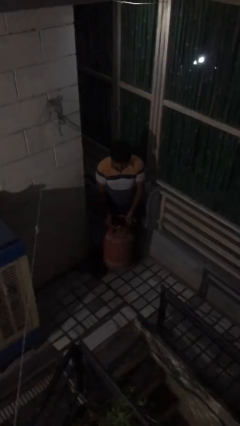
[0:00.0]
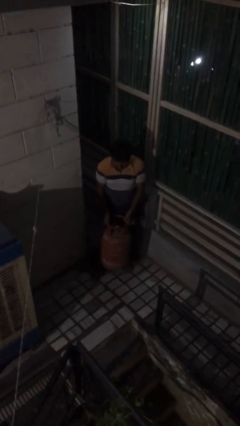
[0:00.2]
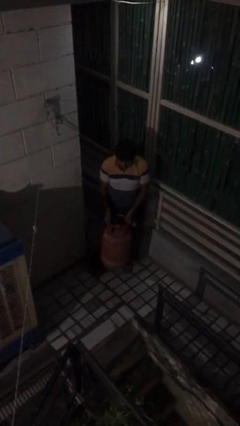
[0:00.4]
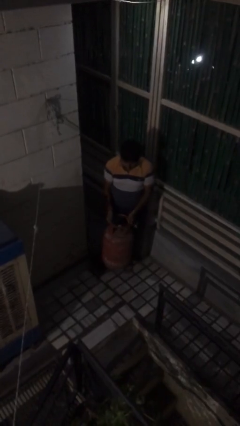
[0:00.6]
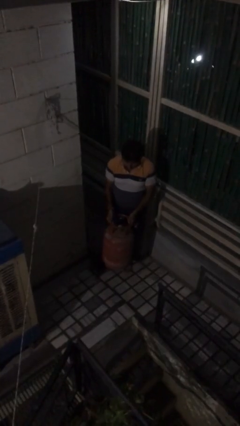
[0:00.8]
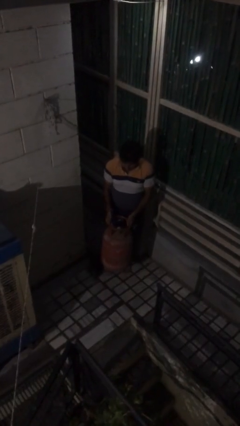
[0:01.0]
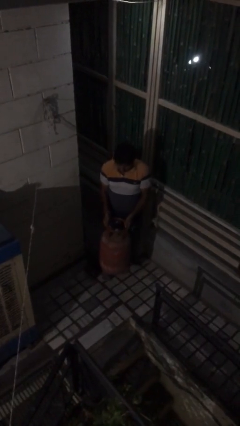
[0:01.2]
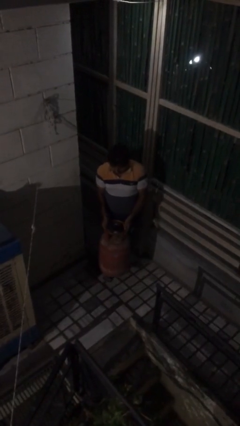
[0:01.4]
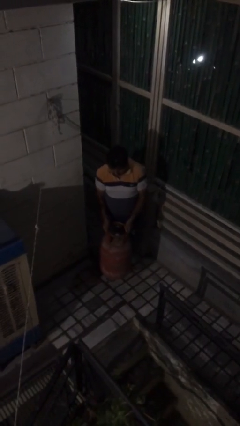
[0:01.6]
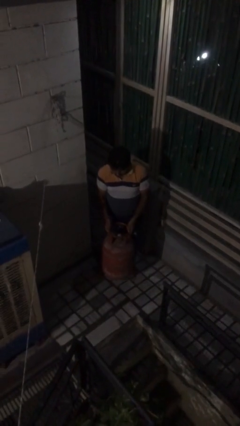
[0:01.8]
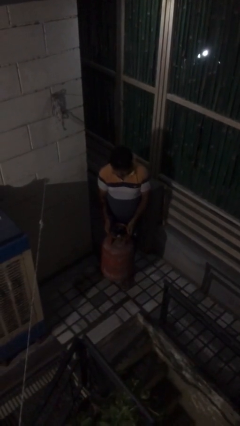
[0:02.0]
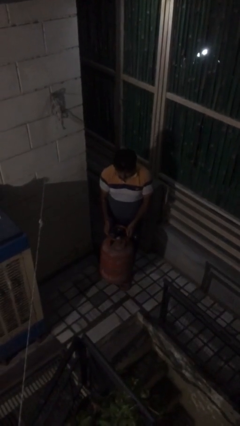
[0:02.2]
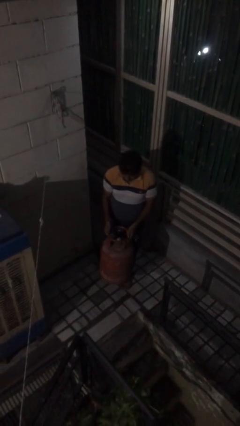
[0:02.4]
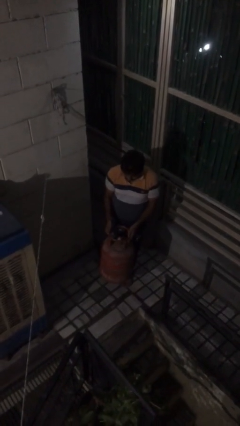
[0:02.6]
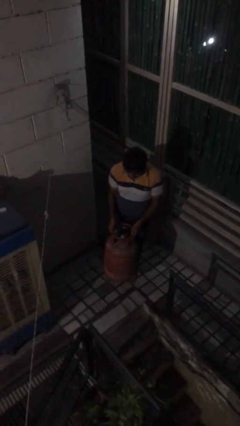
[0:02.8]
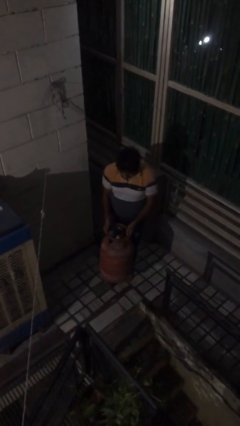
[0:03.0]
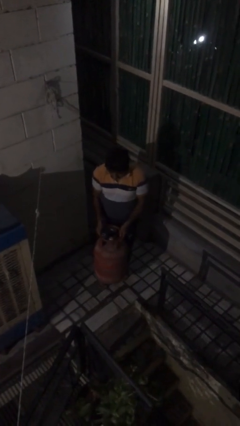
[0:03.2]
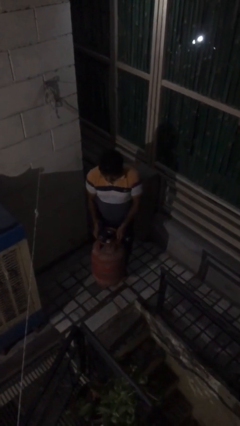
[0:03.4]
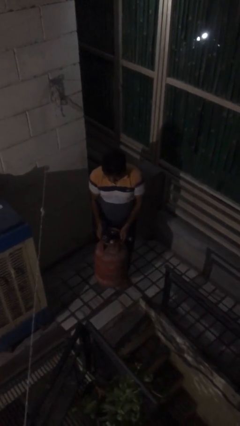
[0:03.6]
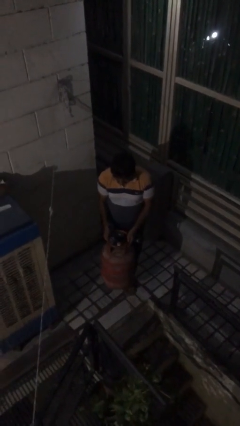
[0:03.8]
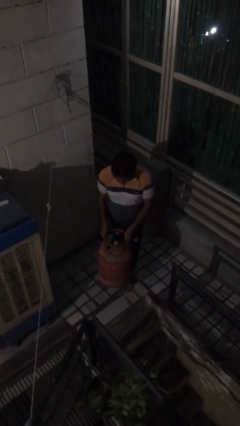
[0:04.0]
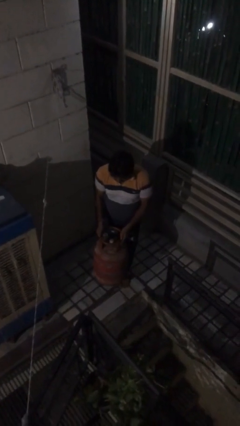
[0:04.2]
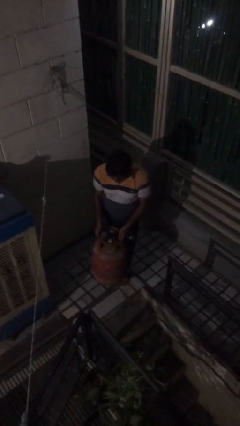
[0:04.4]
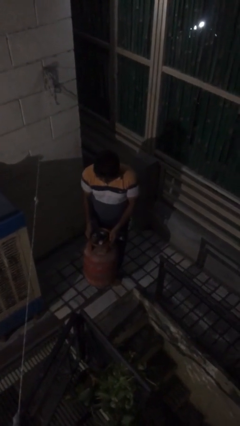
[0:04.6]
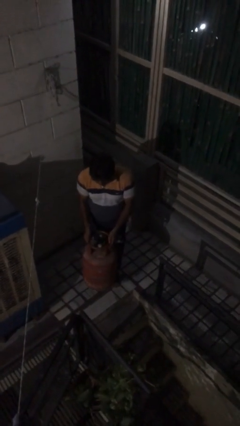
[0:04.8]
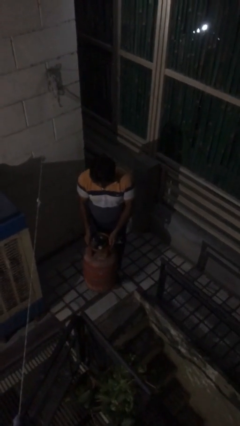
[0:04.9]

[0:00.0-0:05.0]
person carries heavy object

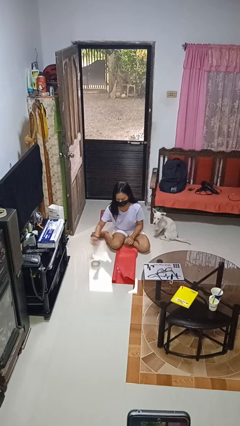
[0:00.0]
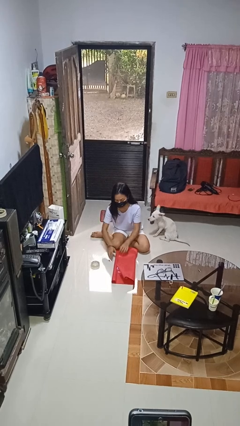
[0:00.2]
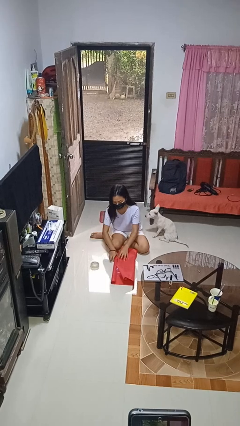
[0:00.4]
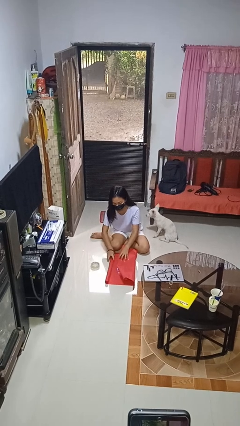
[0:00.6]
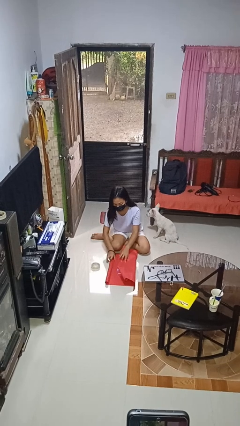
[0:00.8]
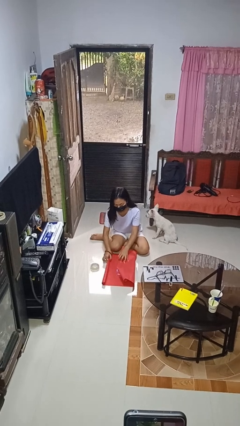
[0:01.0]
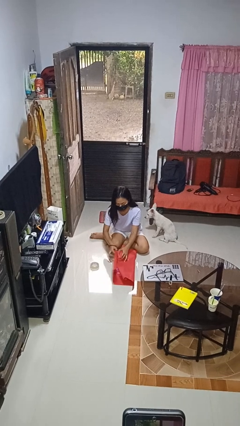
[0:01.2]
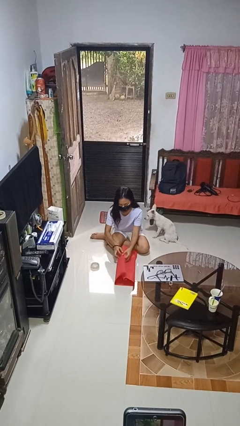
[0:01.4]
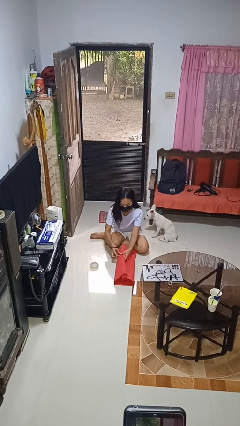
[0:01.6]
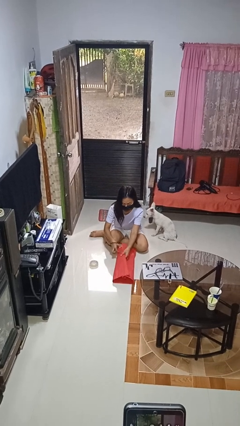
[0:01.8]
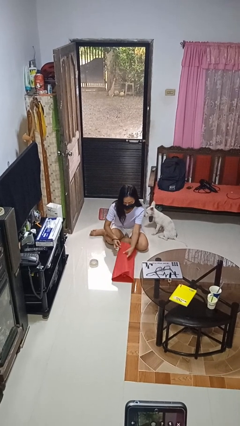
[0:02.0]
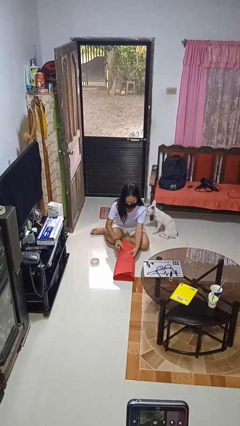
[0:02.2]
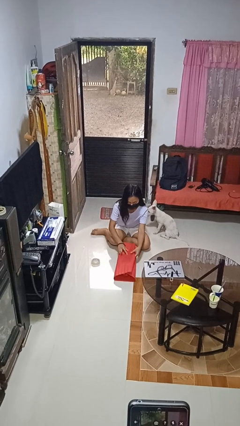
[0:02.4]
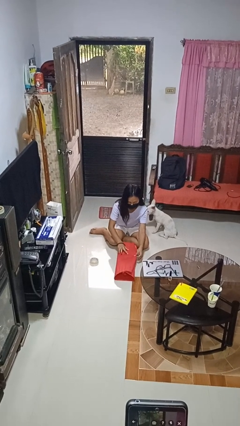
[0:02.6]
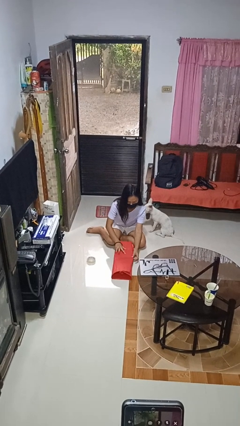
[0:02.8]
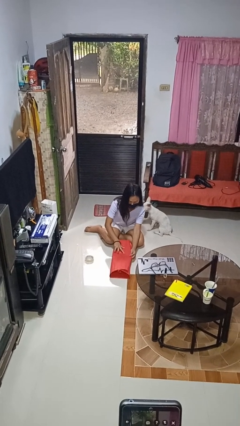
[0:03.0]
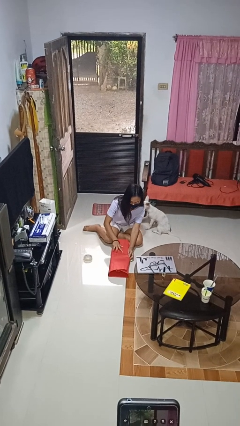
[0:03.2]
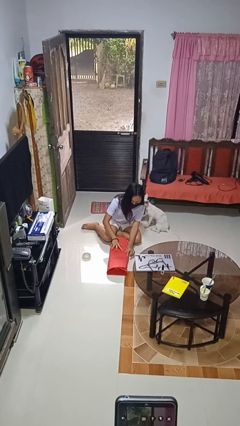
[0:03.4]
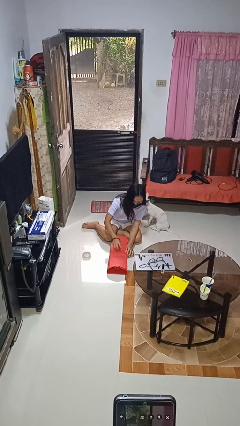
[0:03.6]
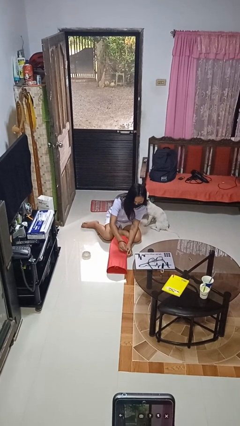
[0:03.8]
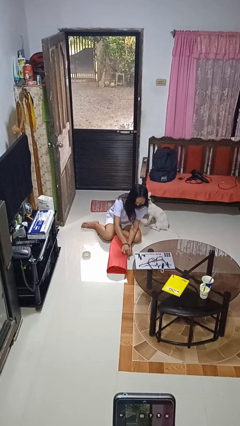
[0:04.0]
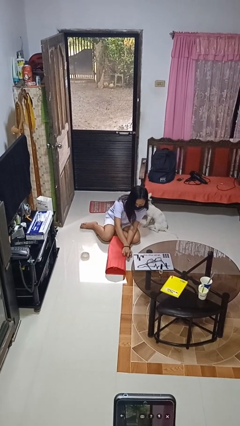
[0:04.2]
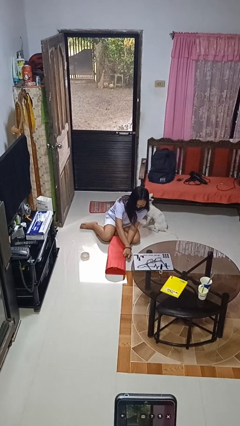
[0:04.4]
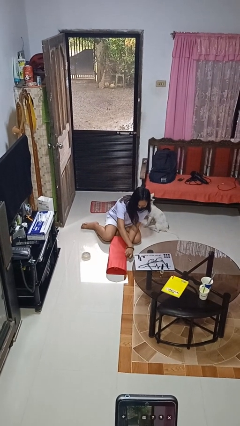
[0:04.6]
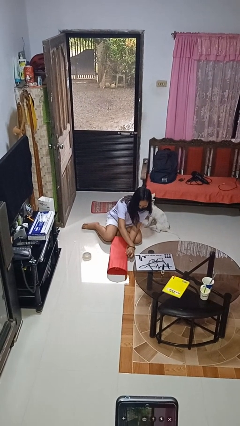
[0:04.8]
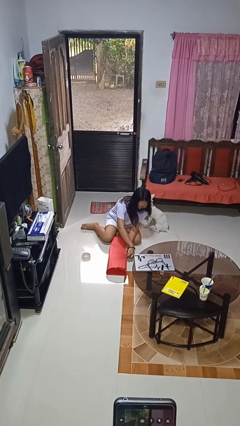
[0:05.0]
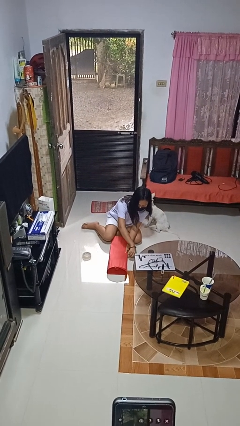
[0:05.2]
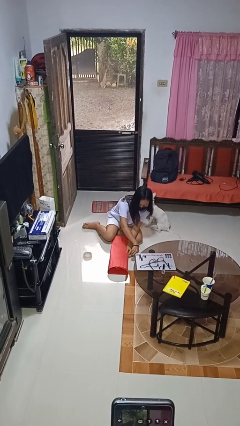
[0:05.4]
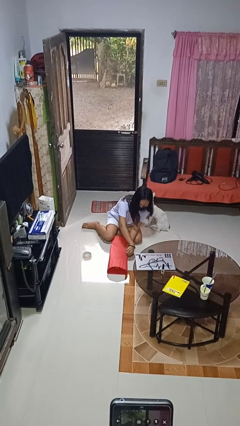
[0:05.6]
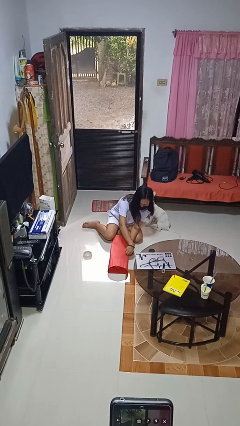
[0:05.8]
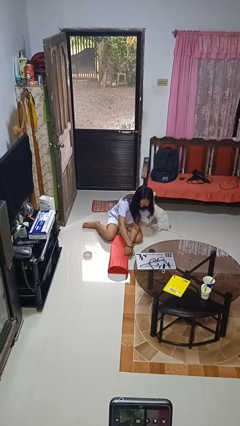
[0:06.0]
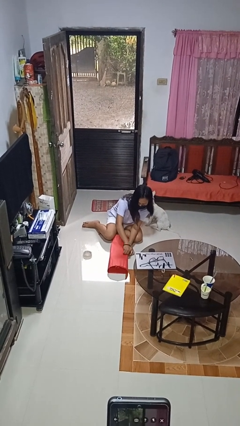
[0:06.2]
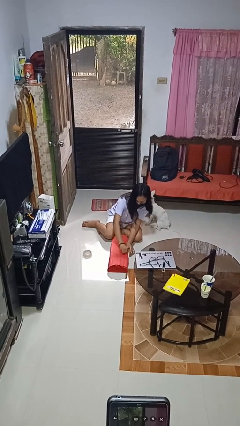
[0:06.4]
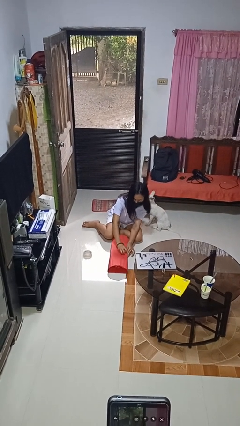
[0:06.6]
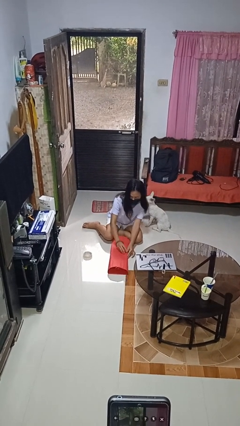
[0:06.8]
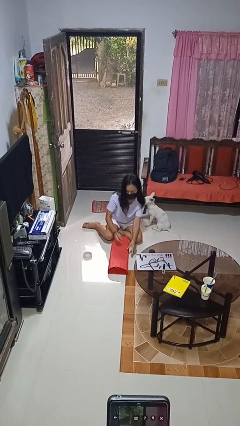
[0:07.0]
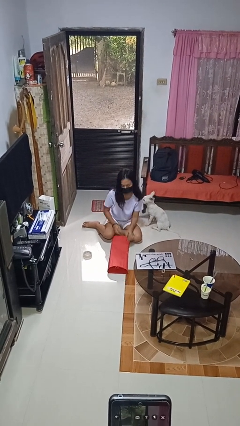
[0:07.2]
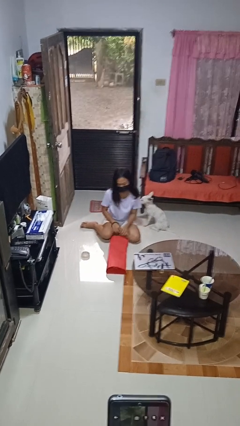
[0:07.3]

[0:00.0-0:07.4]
person wraps box

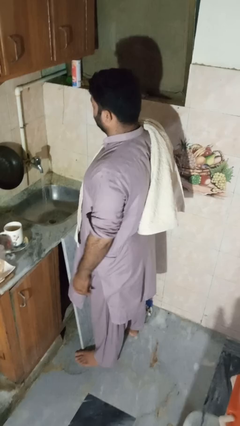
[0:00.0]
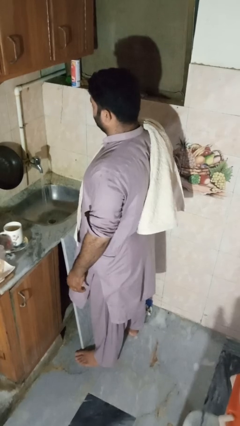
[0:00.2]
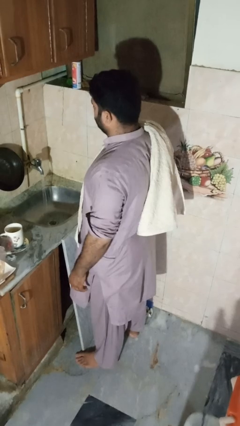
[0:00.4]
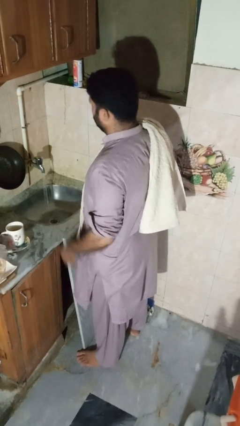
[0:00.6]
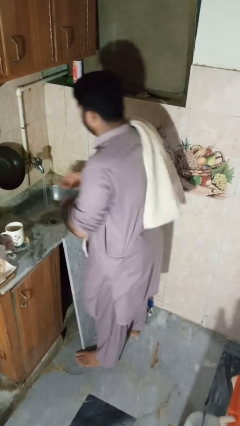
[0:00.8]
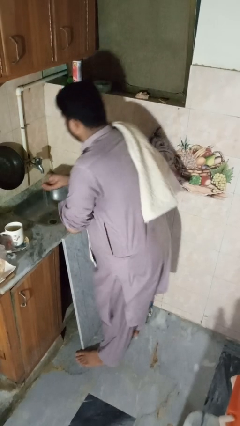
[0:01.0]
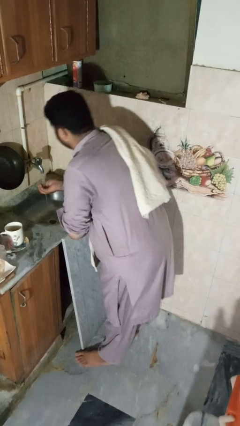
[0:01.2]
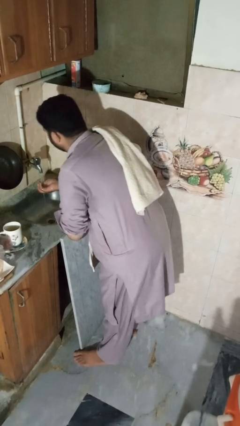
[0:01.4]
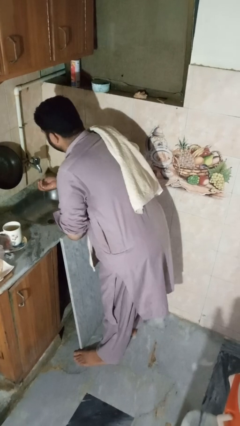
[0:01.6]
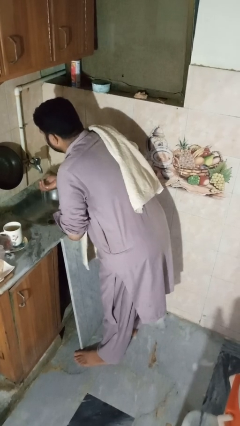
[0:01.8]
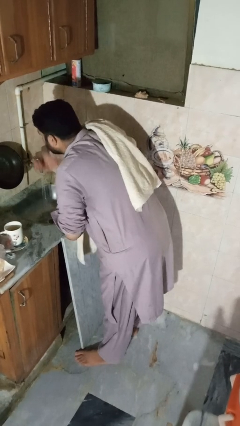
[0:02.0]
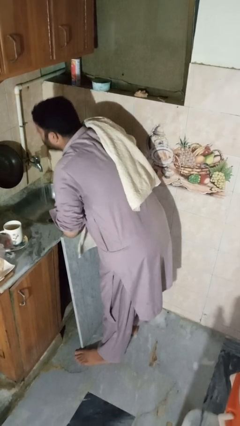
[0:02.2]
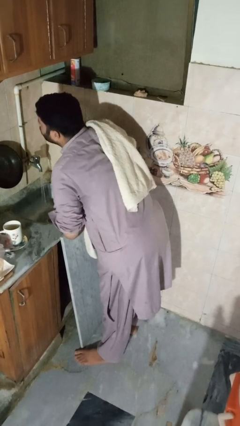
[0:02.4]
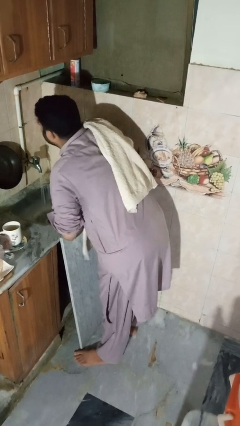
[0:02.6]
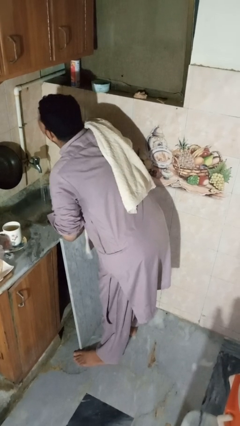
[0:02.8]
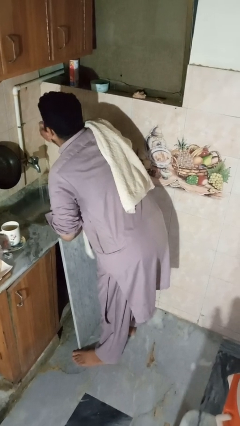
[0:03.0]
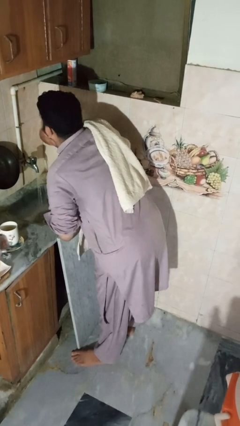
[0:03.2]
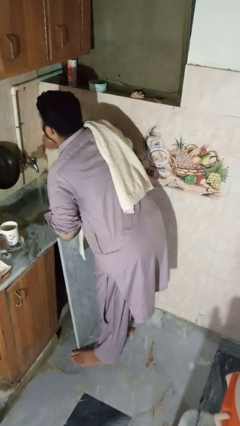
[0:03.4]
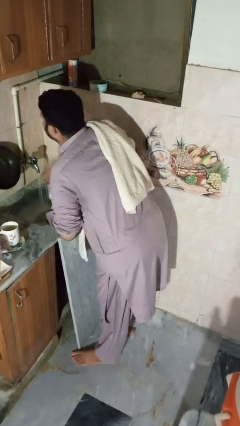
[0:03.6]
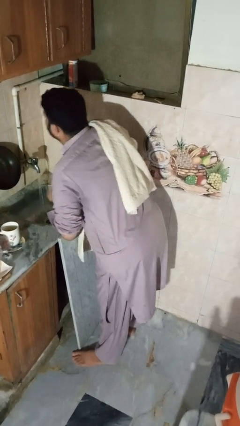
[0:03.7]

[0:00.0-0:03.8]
person washes face

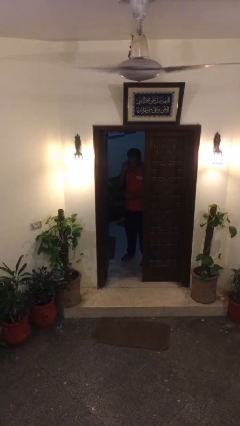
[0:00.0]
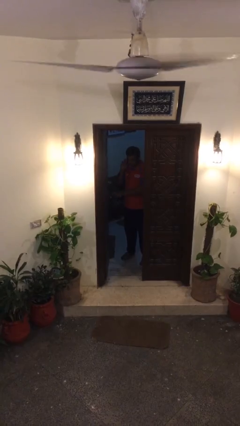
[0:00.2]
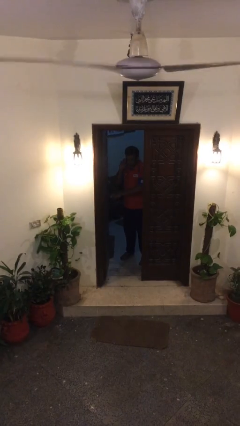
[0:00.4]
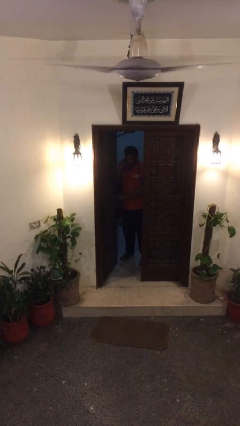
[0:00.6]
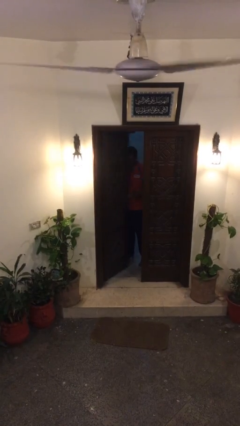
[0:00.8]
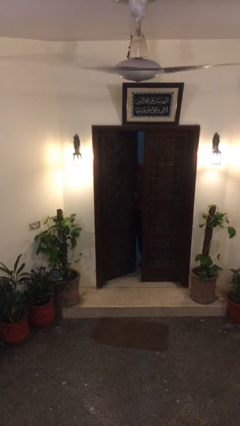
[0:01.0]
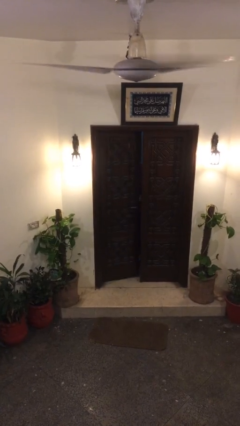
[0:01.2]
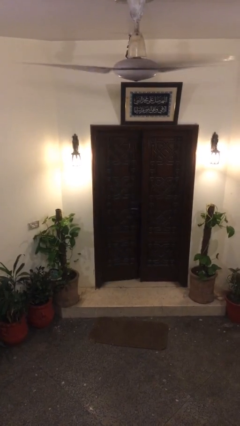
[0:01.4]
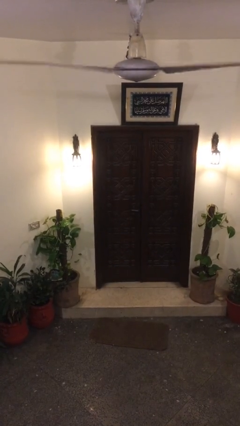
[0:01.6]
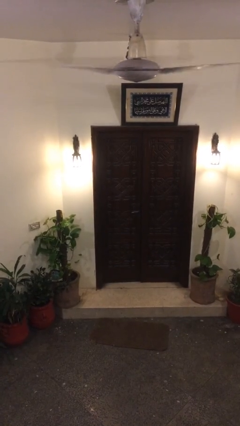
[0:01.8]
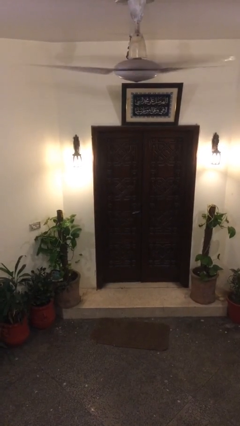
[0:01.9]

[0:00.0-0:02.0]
person closes facility door
